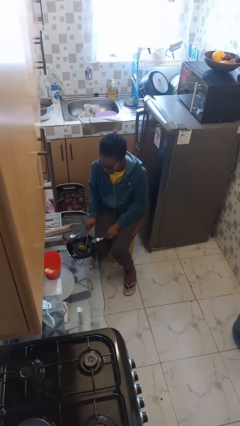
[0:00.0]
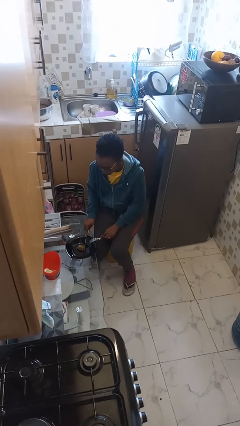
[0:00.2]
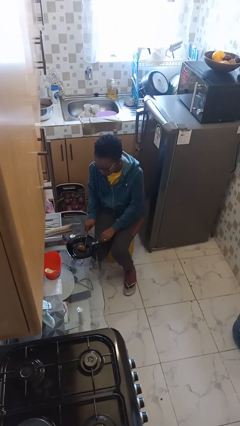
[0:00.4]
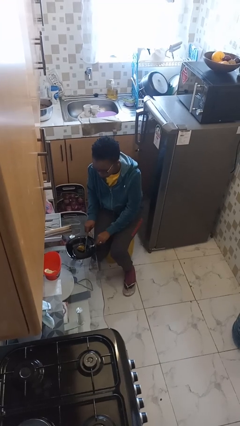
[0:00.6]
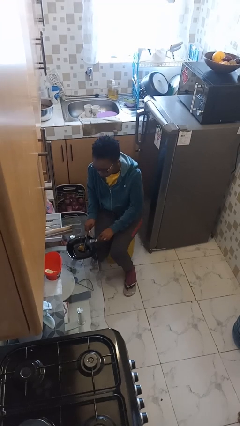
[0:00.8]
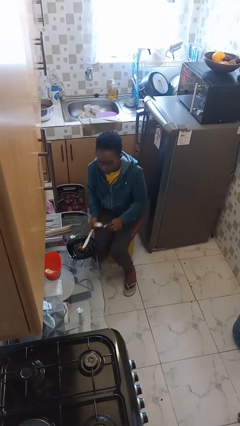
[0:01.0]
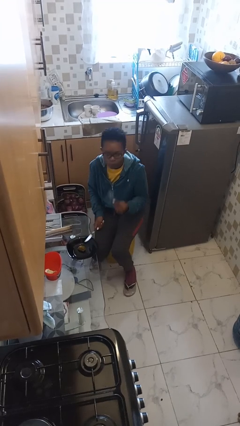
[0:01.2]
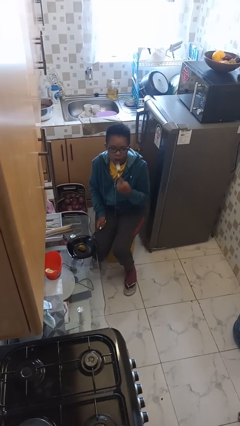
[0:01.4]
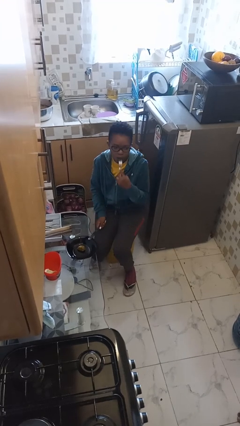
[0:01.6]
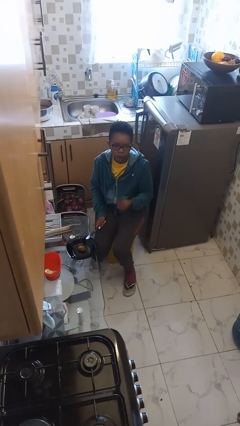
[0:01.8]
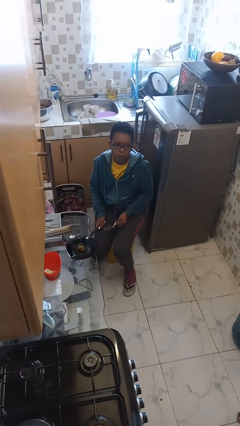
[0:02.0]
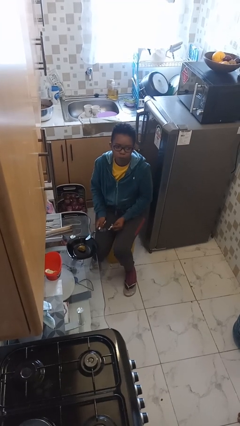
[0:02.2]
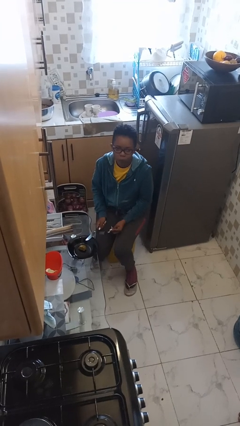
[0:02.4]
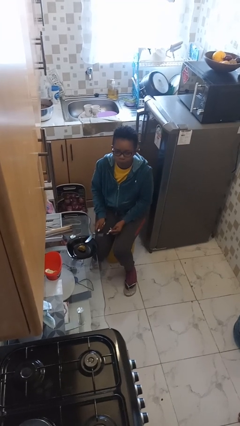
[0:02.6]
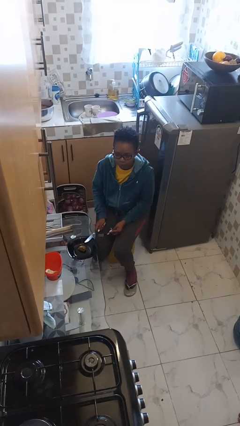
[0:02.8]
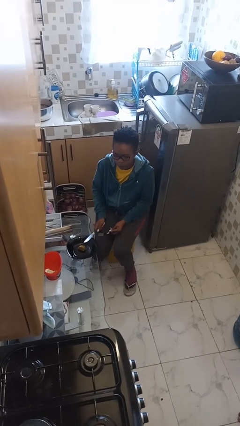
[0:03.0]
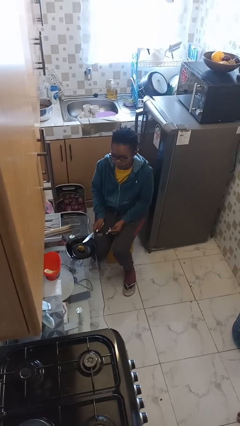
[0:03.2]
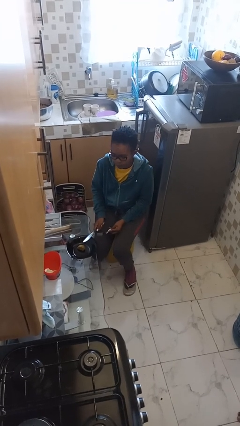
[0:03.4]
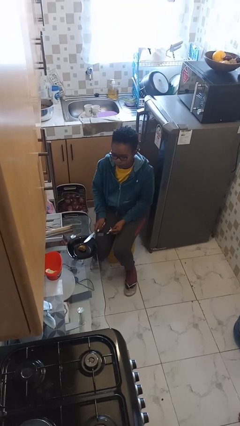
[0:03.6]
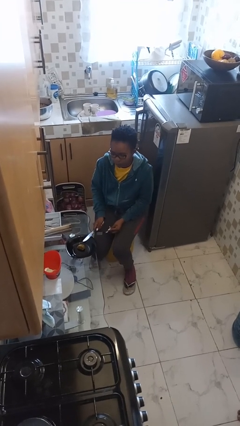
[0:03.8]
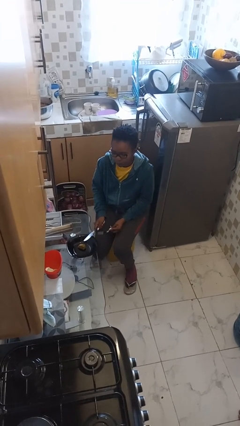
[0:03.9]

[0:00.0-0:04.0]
person eats with utensil

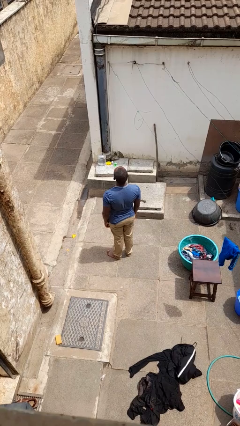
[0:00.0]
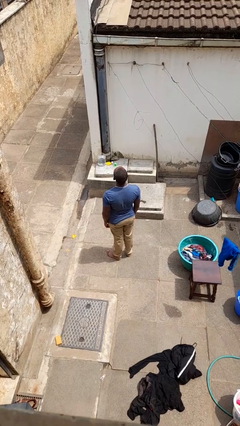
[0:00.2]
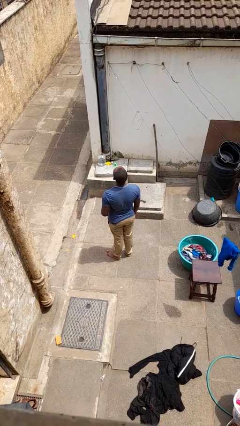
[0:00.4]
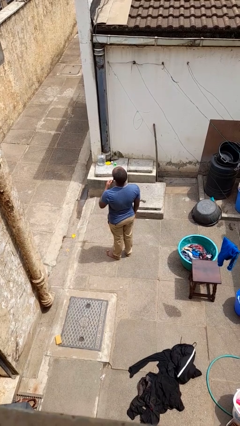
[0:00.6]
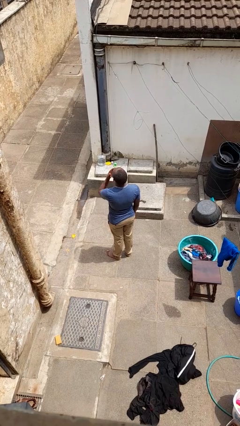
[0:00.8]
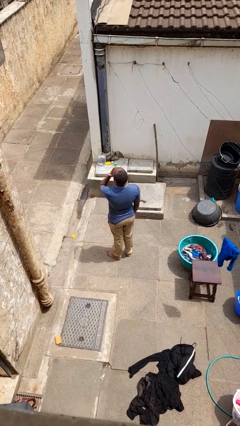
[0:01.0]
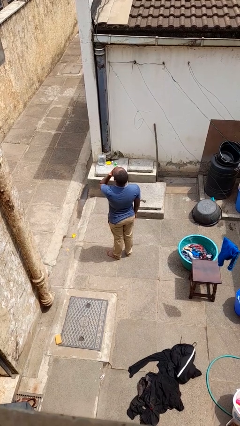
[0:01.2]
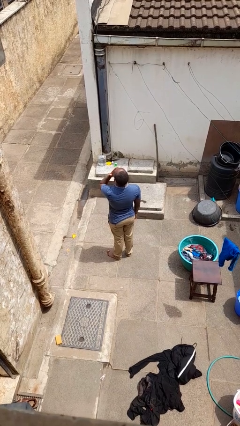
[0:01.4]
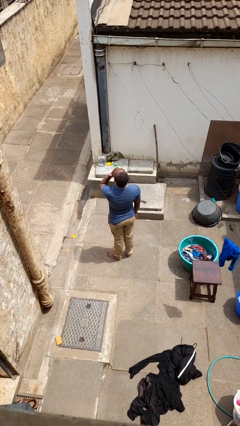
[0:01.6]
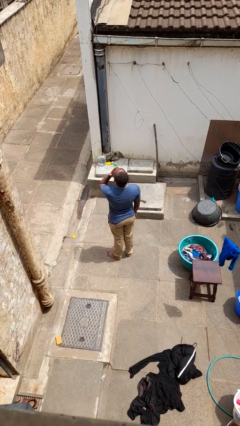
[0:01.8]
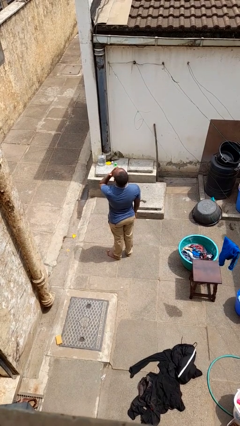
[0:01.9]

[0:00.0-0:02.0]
person yawns

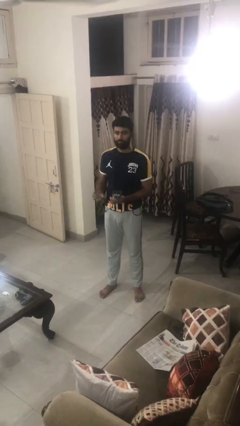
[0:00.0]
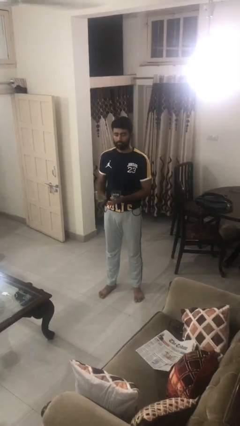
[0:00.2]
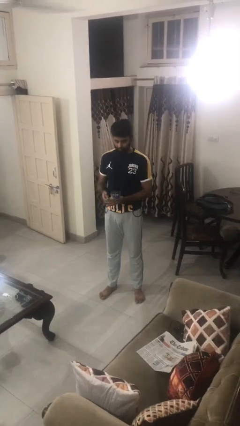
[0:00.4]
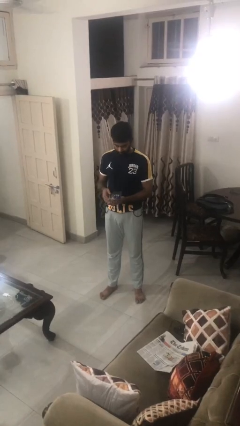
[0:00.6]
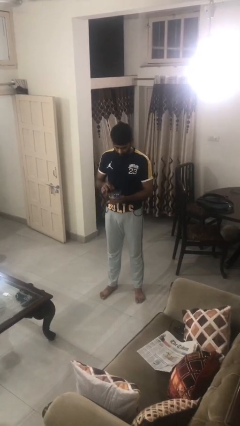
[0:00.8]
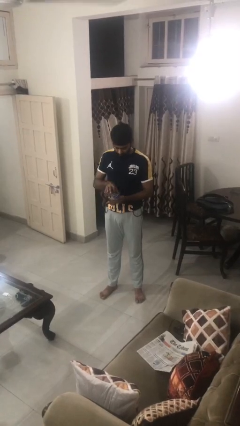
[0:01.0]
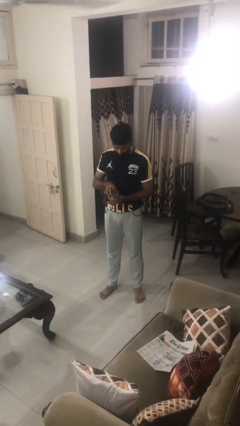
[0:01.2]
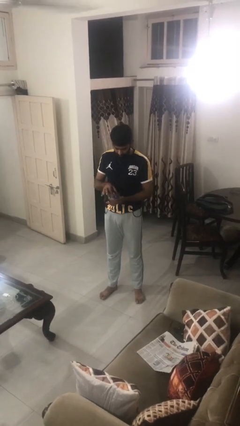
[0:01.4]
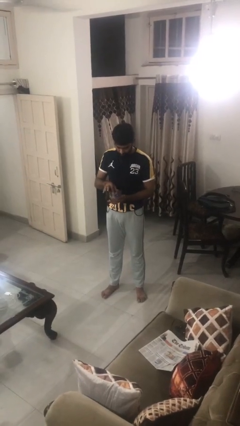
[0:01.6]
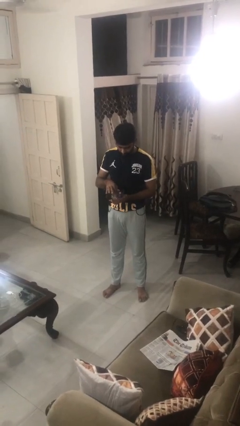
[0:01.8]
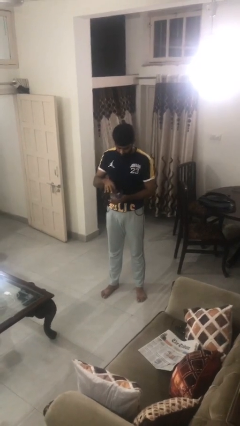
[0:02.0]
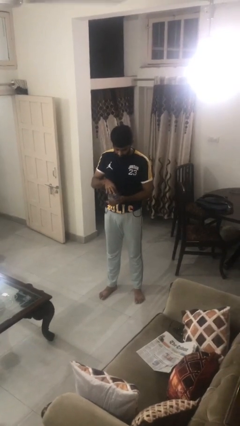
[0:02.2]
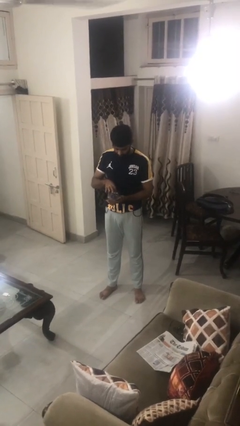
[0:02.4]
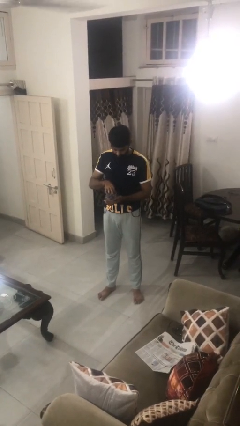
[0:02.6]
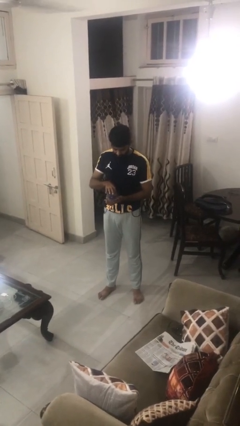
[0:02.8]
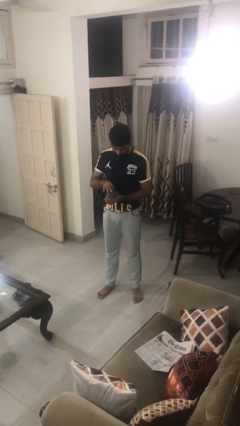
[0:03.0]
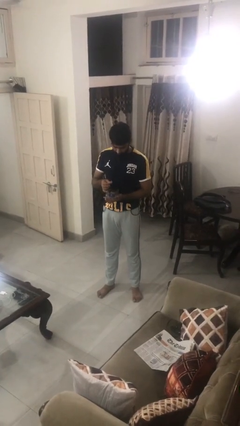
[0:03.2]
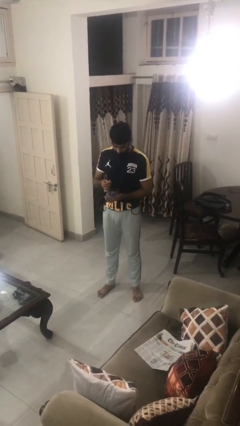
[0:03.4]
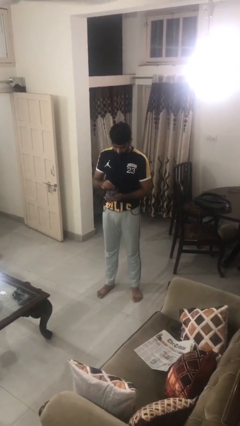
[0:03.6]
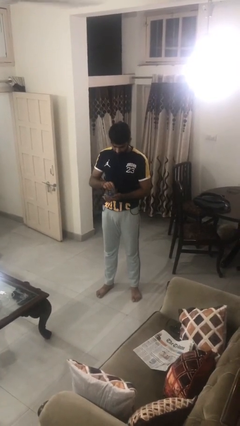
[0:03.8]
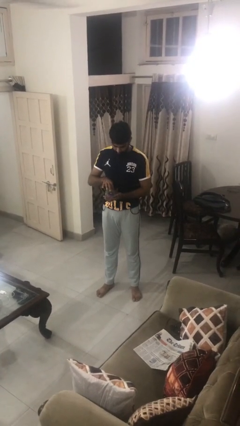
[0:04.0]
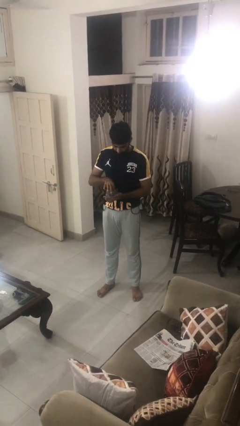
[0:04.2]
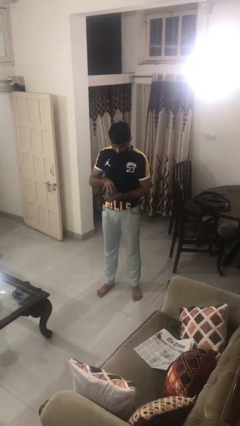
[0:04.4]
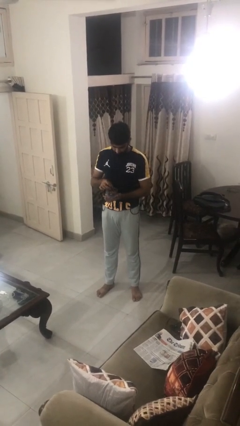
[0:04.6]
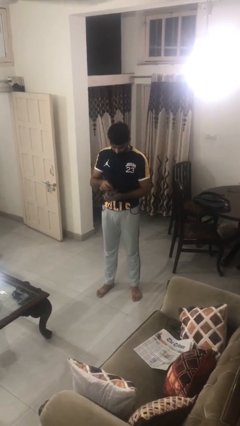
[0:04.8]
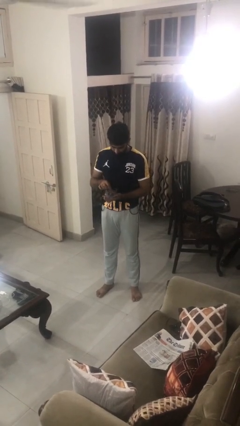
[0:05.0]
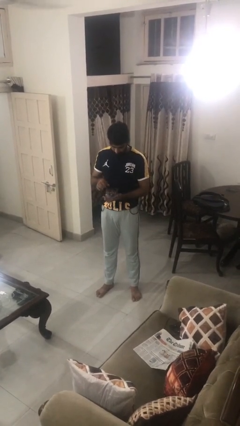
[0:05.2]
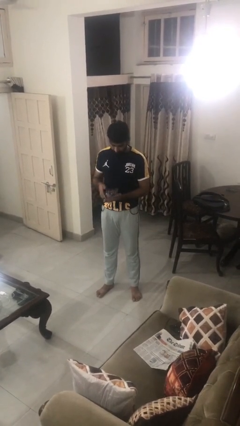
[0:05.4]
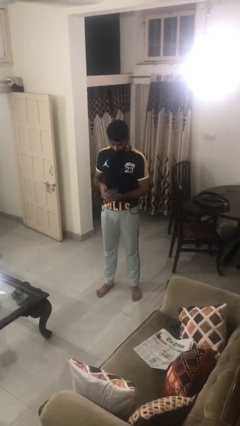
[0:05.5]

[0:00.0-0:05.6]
person searches jewelry box

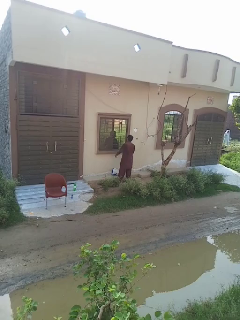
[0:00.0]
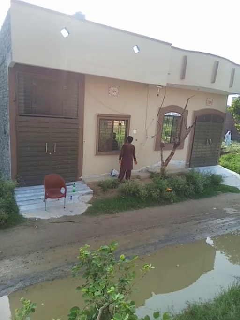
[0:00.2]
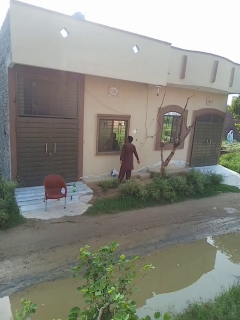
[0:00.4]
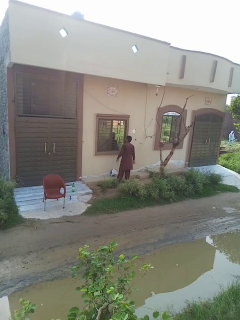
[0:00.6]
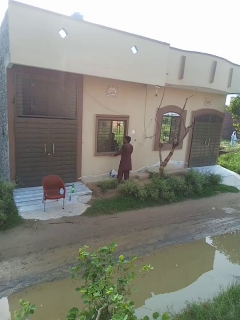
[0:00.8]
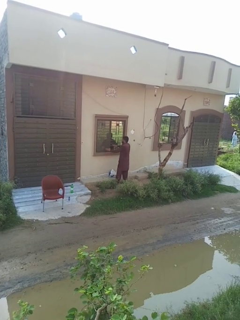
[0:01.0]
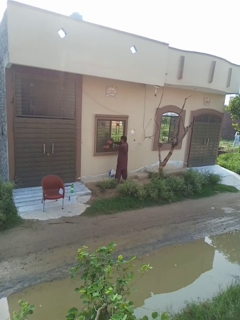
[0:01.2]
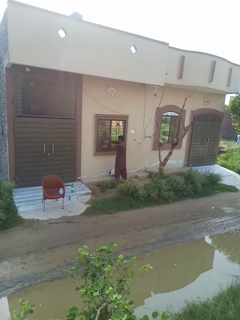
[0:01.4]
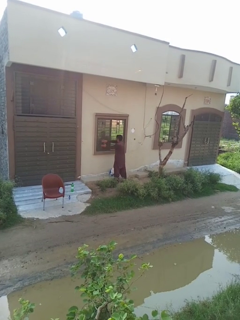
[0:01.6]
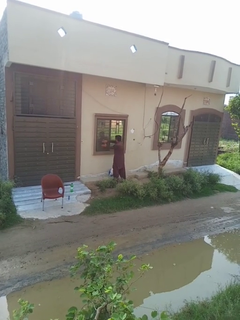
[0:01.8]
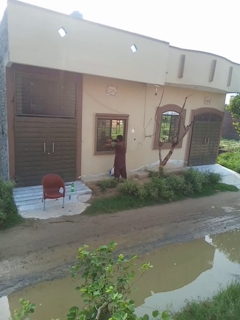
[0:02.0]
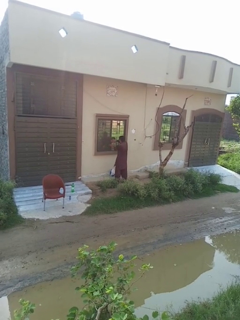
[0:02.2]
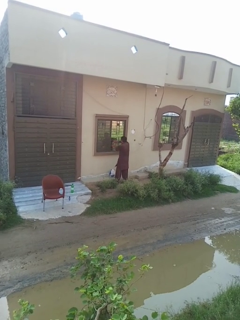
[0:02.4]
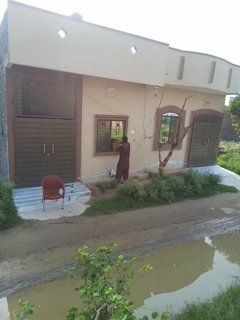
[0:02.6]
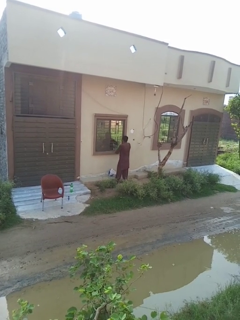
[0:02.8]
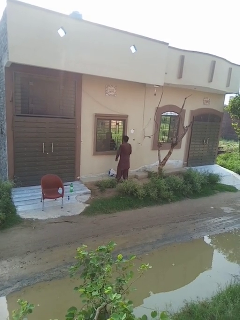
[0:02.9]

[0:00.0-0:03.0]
person opens home window

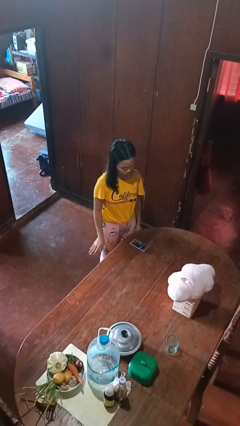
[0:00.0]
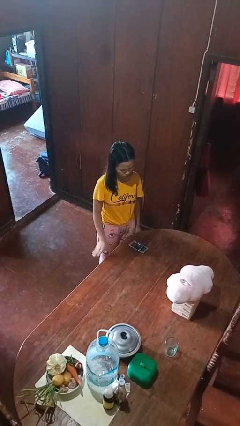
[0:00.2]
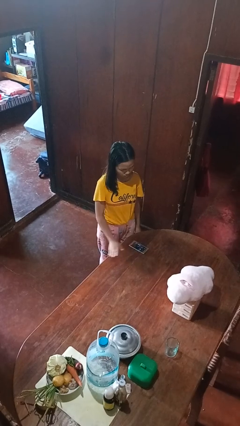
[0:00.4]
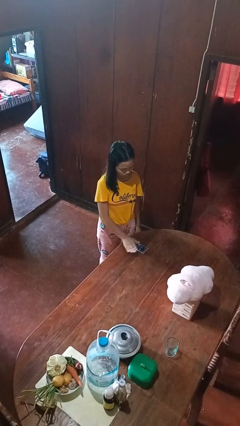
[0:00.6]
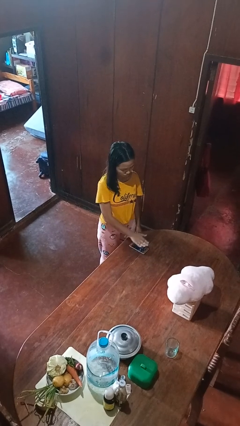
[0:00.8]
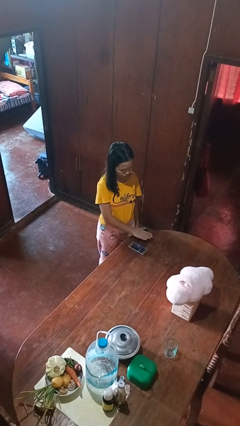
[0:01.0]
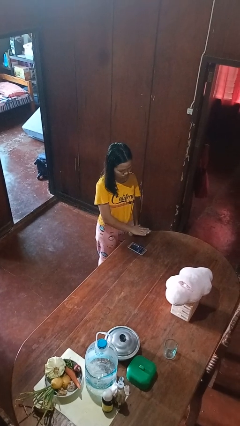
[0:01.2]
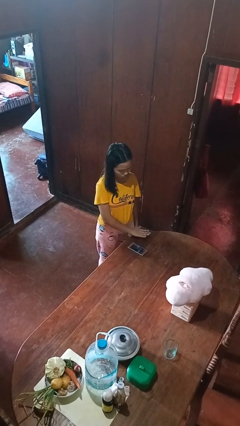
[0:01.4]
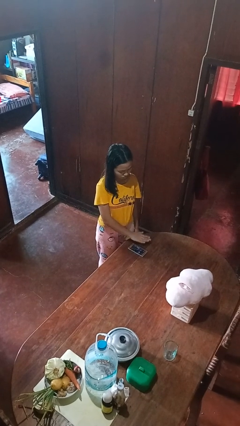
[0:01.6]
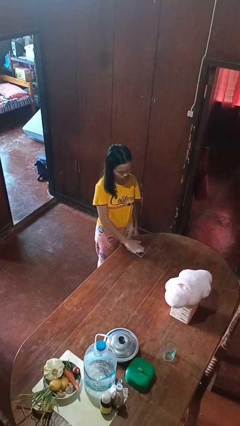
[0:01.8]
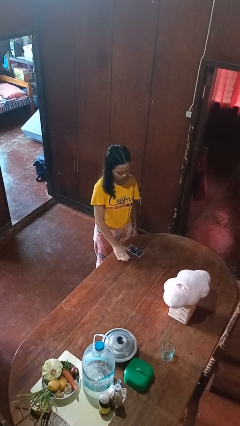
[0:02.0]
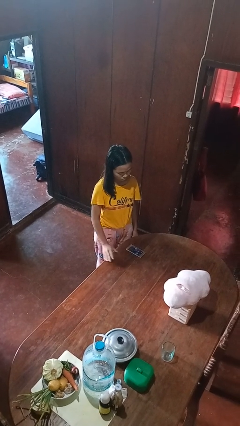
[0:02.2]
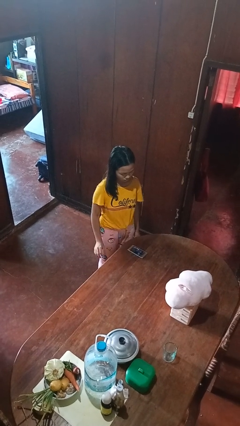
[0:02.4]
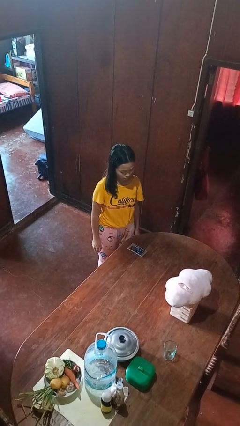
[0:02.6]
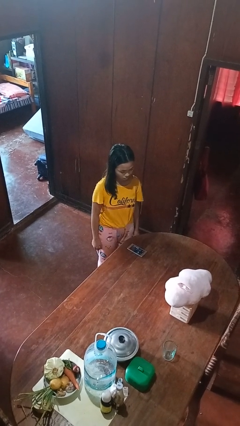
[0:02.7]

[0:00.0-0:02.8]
person waves hand over object

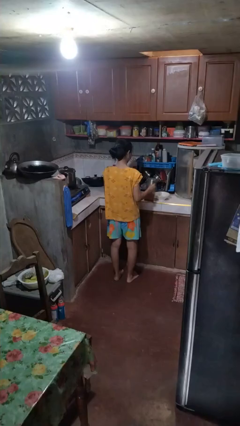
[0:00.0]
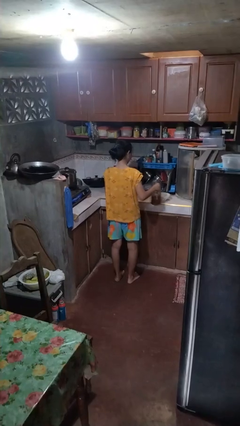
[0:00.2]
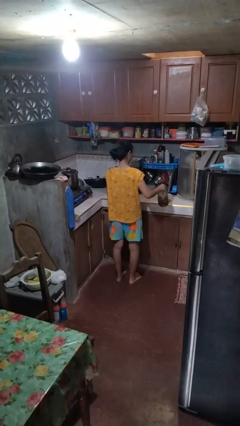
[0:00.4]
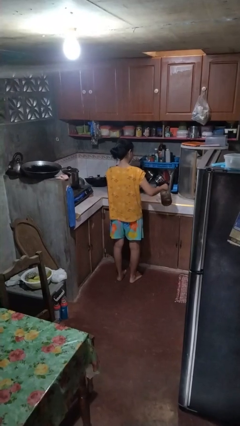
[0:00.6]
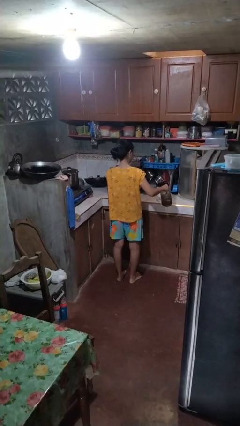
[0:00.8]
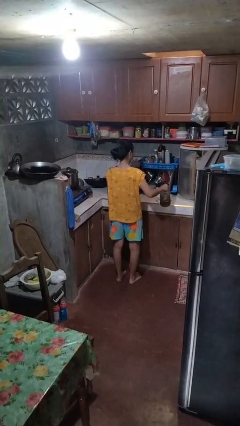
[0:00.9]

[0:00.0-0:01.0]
person pours into bowl
